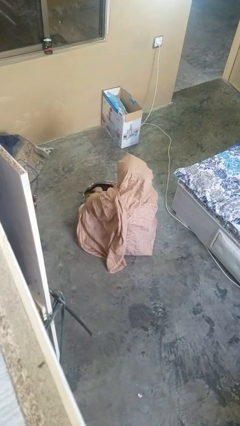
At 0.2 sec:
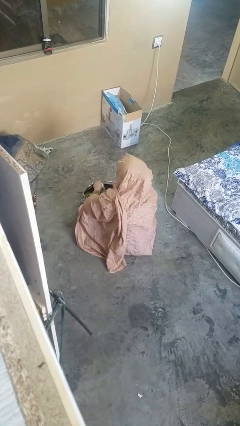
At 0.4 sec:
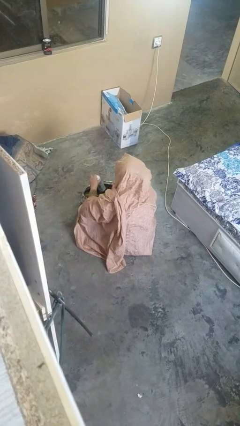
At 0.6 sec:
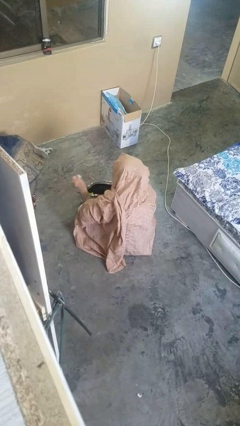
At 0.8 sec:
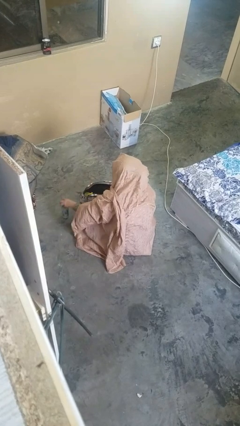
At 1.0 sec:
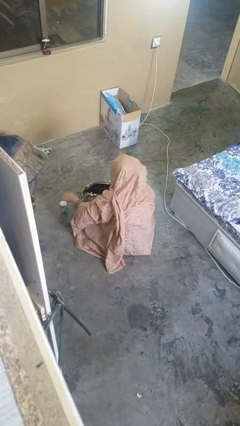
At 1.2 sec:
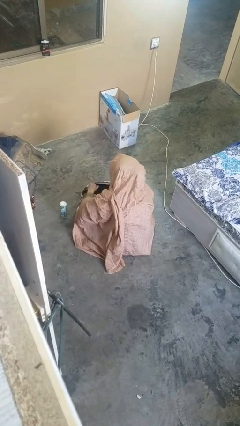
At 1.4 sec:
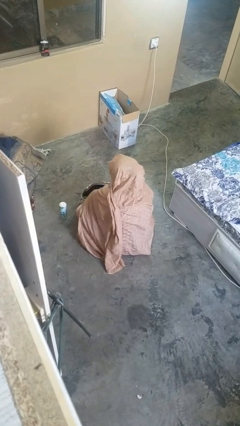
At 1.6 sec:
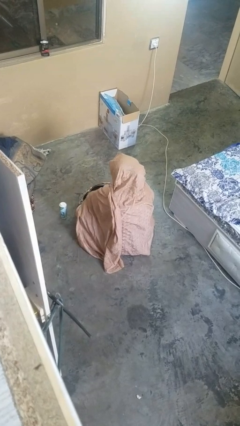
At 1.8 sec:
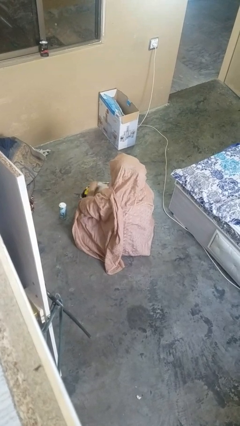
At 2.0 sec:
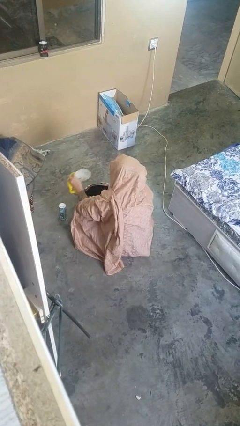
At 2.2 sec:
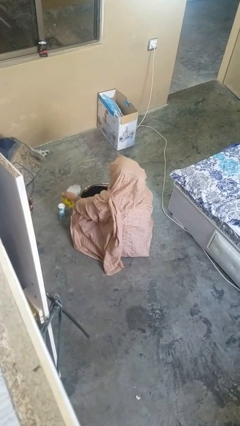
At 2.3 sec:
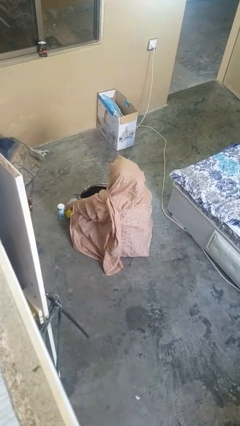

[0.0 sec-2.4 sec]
person takes object from purse

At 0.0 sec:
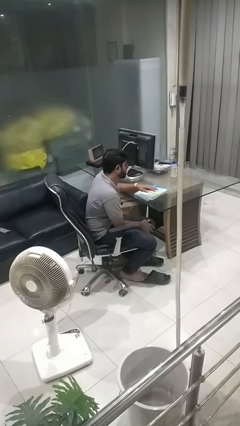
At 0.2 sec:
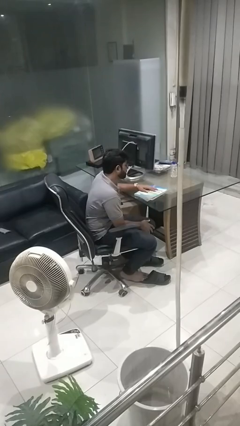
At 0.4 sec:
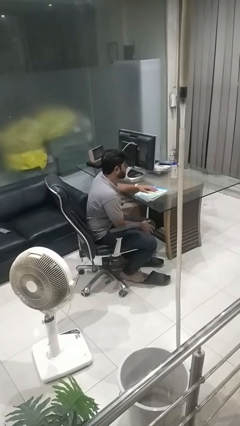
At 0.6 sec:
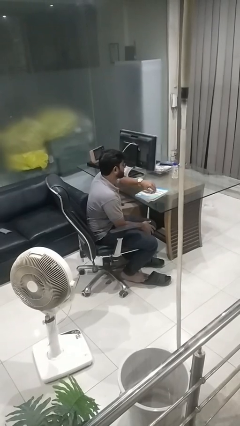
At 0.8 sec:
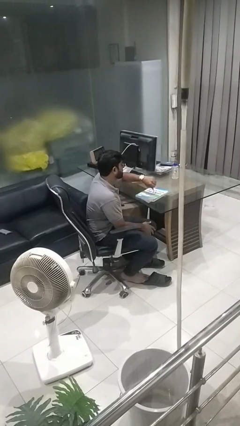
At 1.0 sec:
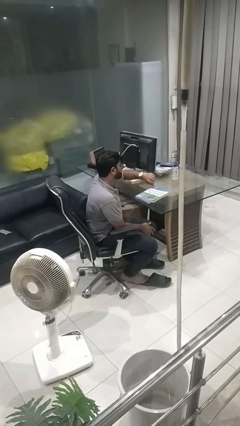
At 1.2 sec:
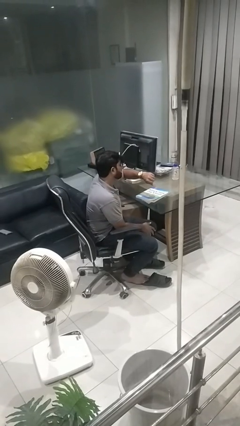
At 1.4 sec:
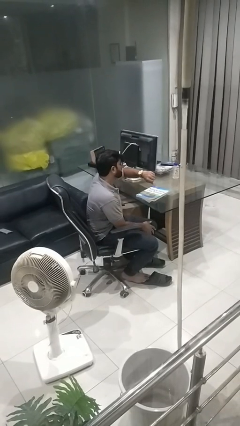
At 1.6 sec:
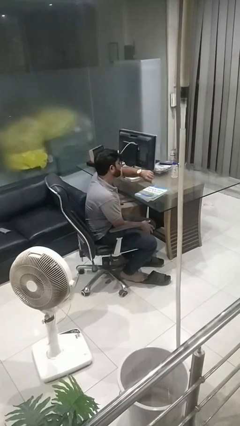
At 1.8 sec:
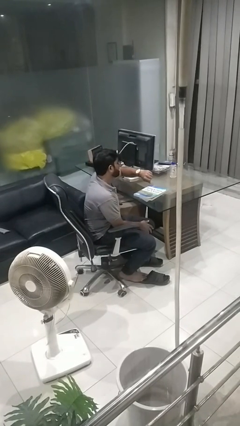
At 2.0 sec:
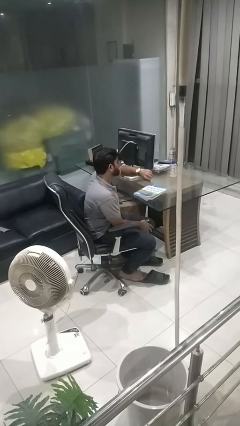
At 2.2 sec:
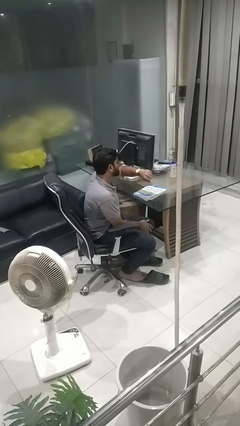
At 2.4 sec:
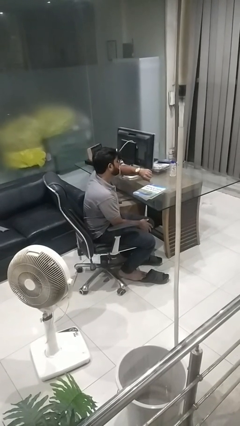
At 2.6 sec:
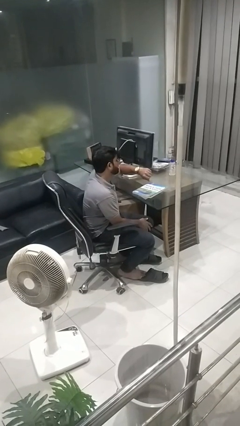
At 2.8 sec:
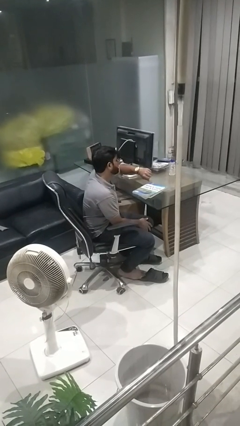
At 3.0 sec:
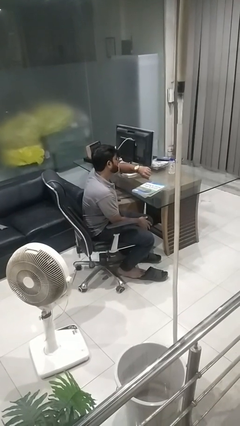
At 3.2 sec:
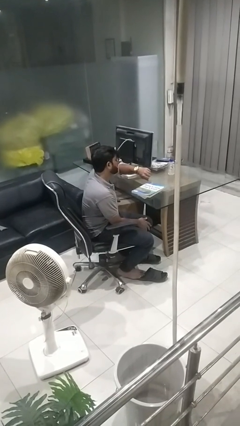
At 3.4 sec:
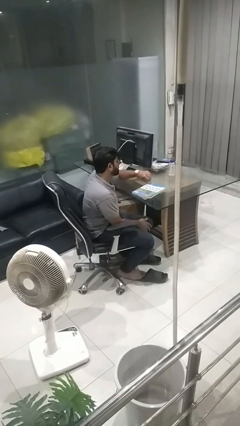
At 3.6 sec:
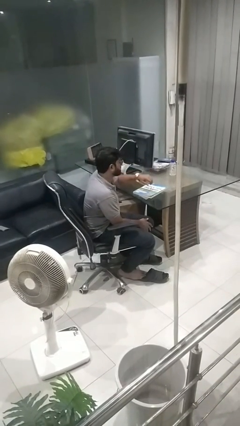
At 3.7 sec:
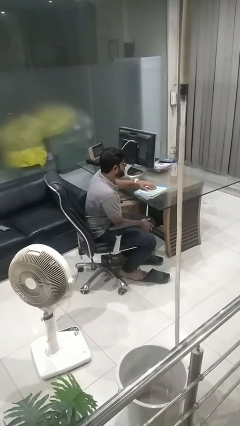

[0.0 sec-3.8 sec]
person looks at wristwatch

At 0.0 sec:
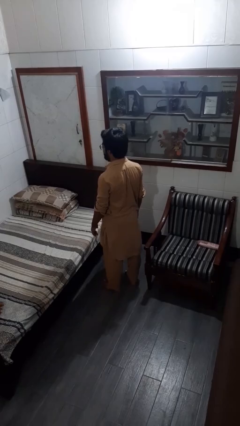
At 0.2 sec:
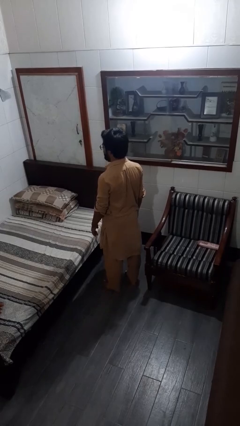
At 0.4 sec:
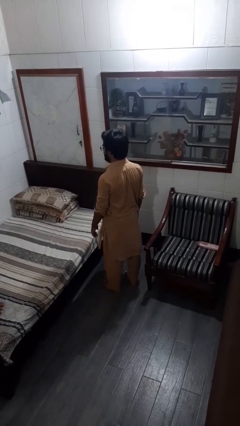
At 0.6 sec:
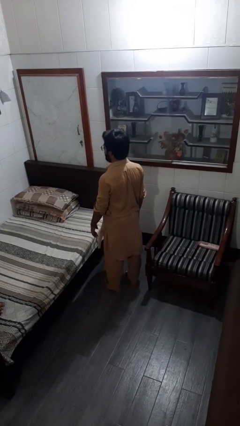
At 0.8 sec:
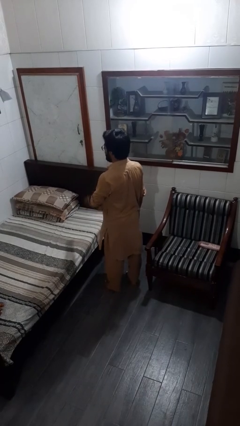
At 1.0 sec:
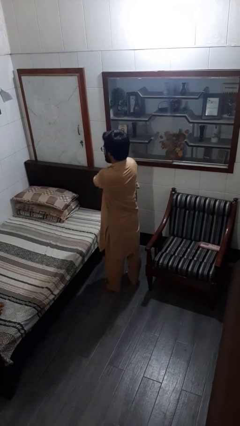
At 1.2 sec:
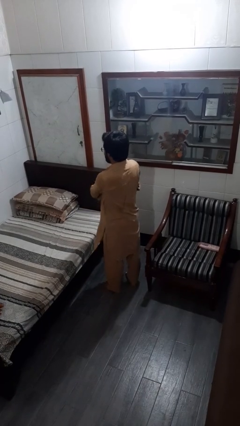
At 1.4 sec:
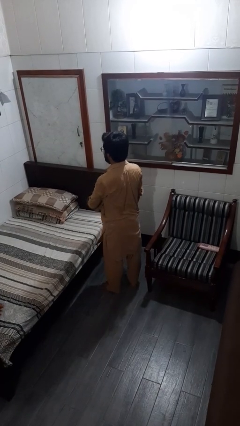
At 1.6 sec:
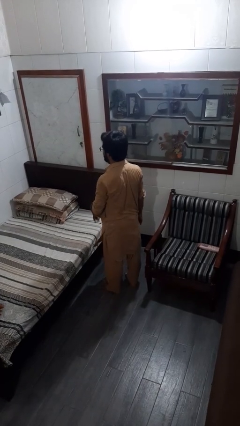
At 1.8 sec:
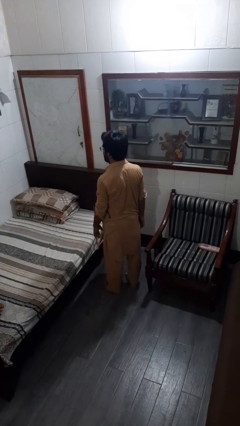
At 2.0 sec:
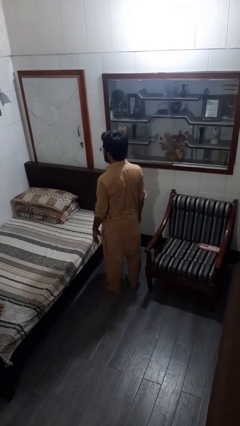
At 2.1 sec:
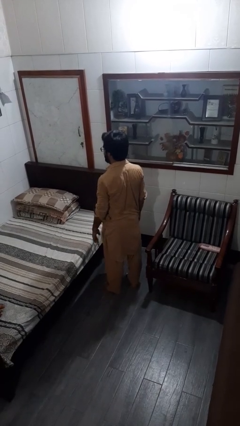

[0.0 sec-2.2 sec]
person swats bug

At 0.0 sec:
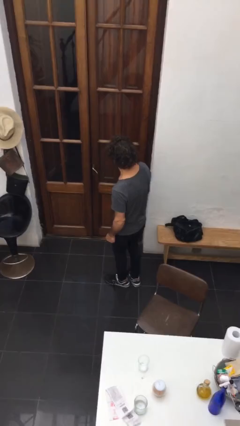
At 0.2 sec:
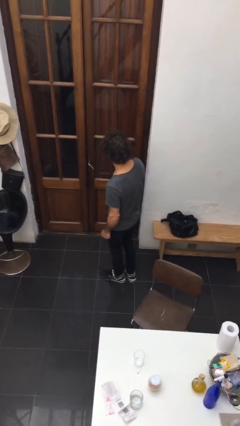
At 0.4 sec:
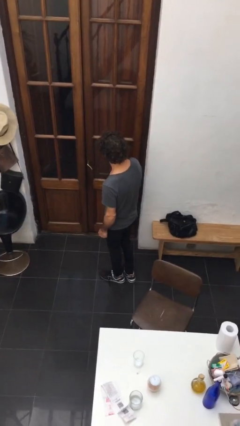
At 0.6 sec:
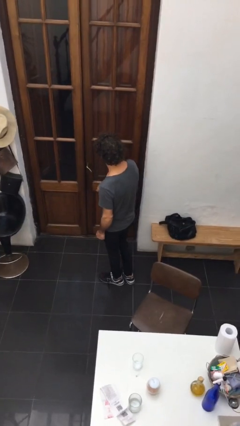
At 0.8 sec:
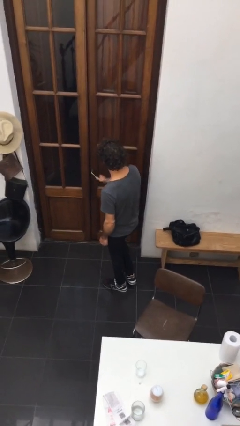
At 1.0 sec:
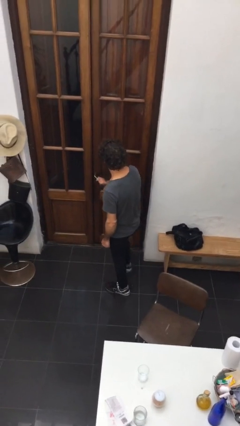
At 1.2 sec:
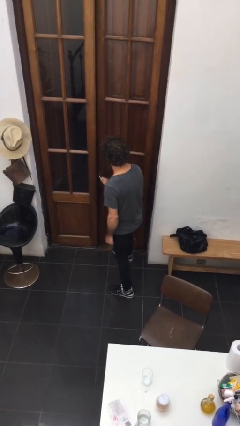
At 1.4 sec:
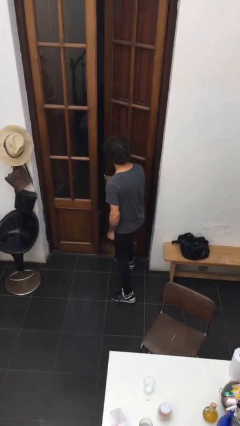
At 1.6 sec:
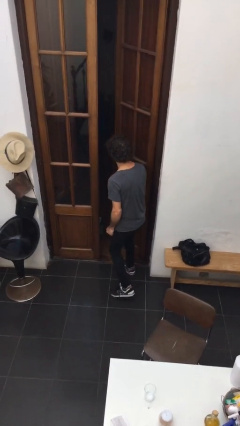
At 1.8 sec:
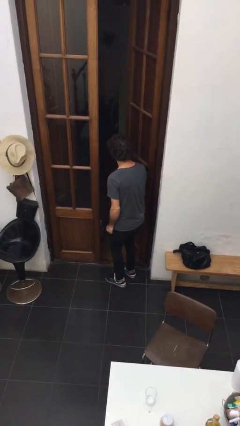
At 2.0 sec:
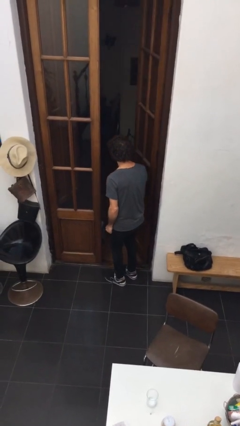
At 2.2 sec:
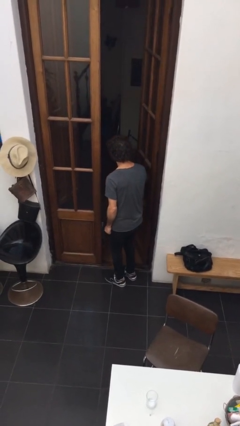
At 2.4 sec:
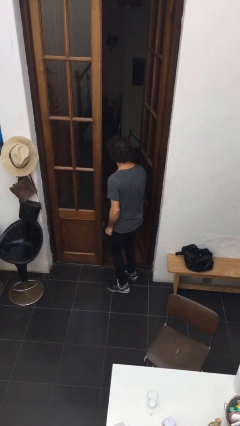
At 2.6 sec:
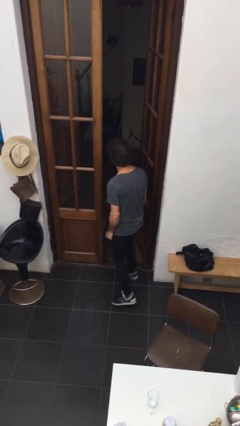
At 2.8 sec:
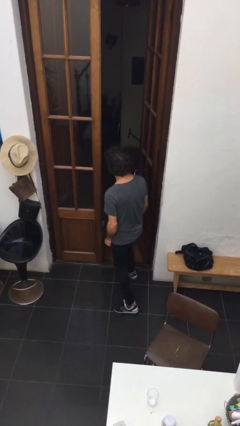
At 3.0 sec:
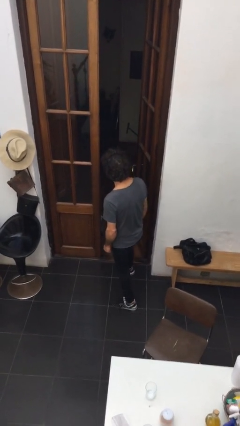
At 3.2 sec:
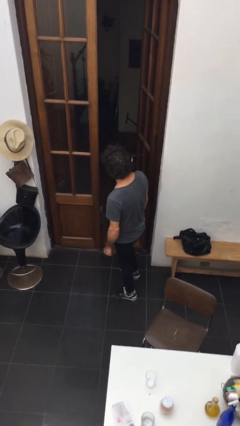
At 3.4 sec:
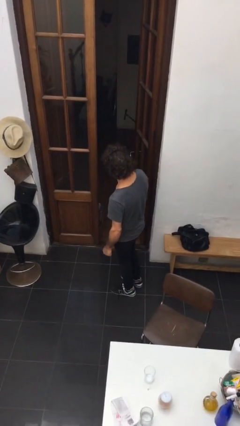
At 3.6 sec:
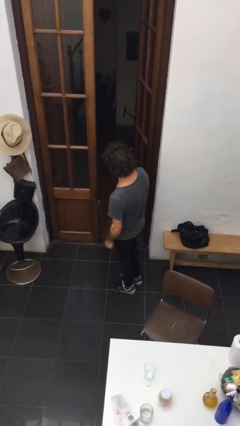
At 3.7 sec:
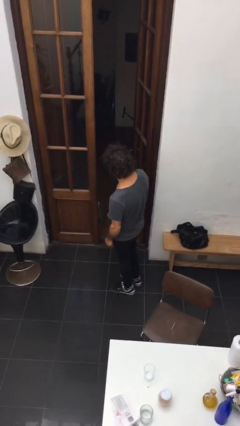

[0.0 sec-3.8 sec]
person opens facility door

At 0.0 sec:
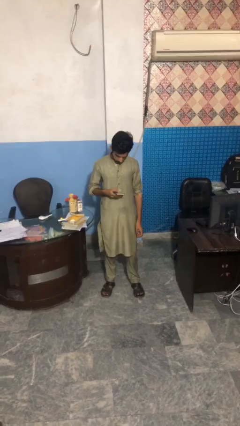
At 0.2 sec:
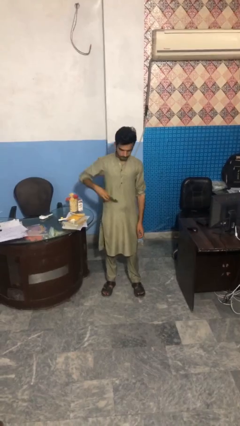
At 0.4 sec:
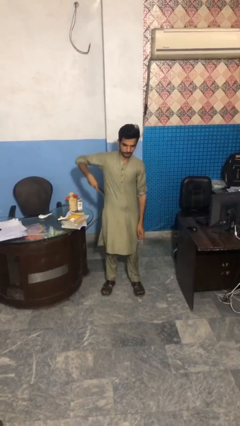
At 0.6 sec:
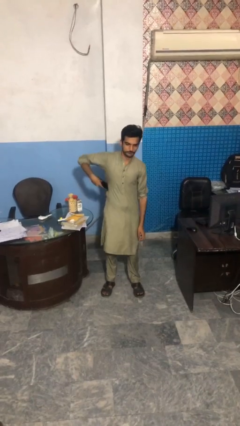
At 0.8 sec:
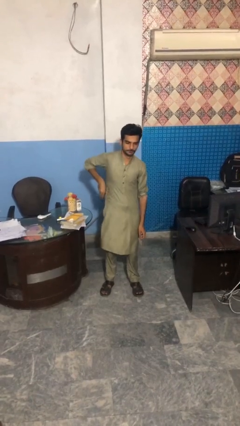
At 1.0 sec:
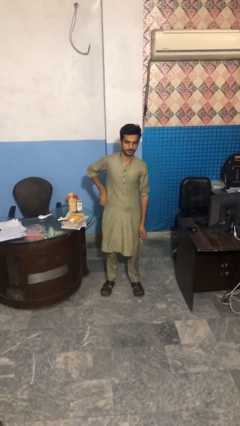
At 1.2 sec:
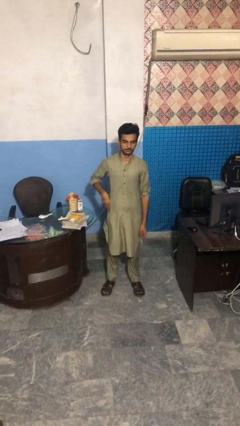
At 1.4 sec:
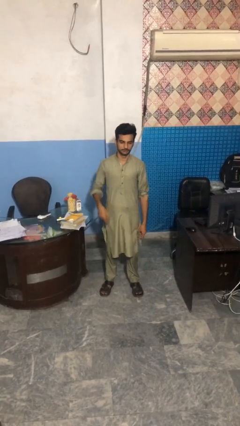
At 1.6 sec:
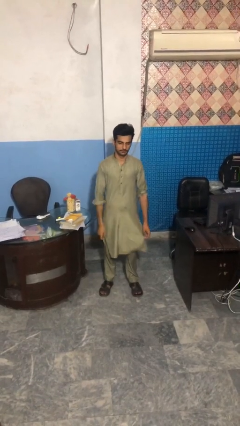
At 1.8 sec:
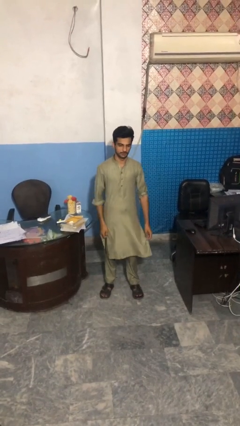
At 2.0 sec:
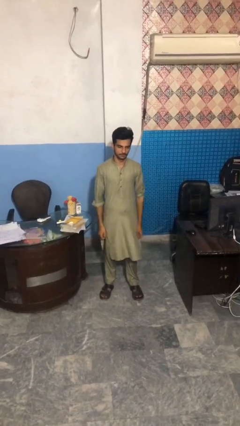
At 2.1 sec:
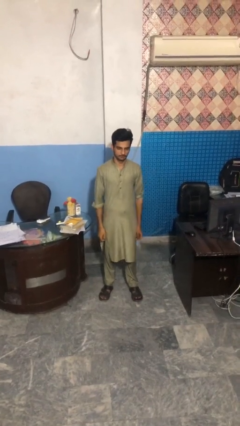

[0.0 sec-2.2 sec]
person puts phone into pocket

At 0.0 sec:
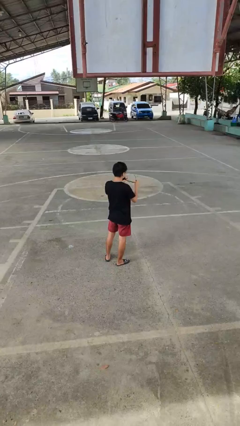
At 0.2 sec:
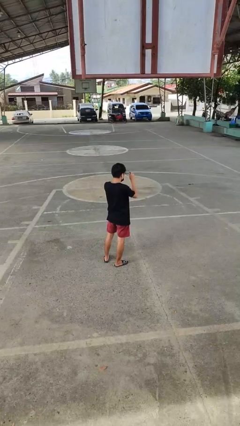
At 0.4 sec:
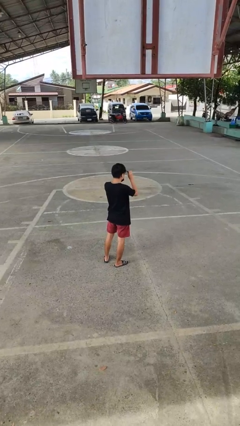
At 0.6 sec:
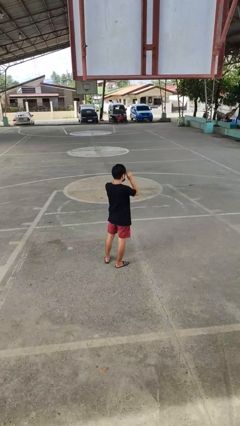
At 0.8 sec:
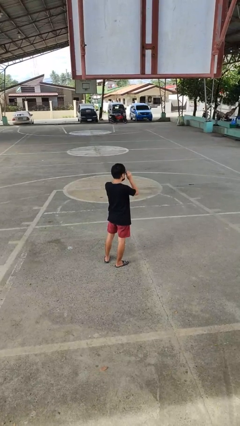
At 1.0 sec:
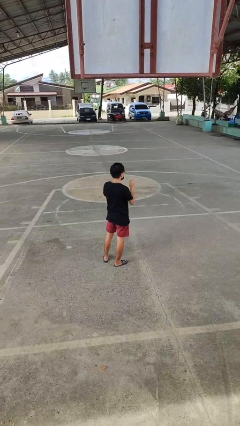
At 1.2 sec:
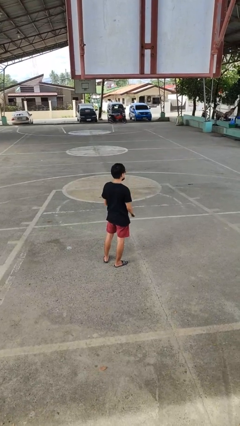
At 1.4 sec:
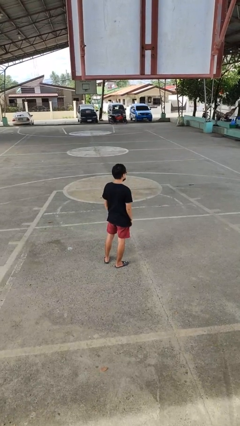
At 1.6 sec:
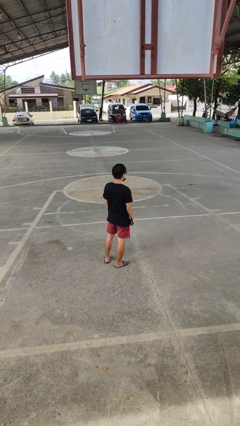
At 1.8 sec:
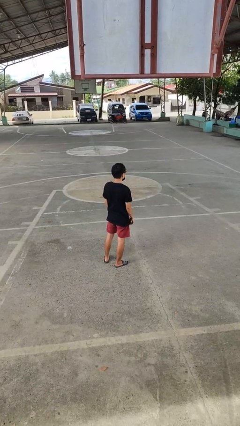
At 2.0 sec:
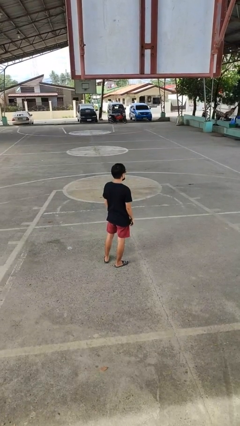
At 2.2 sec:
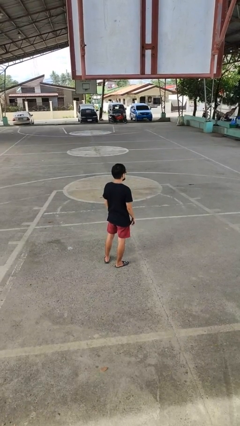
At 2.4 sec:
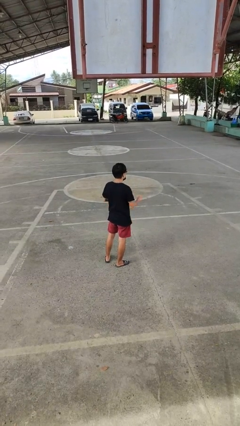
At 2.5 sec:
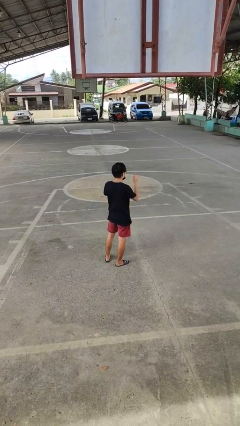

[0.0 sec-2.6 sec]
person puts on glasses
